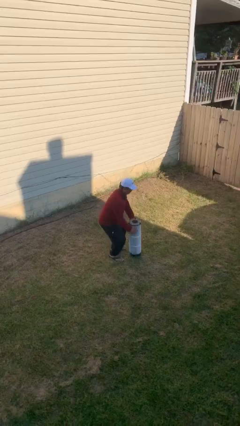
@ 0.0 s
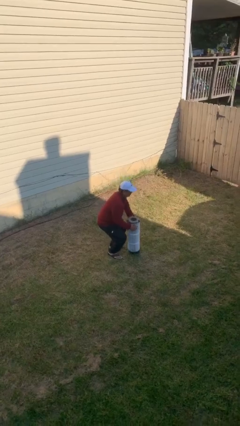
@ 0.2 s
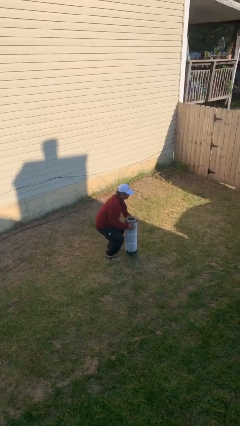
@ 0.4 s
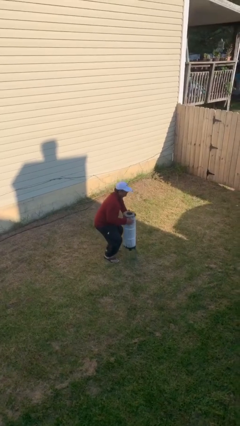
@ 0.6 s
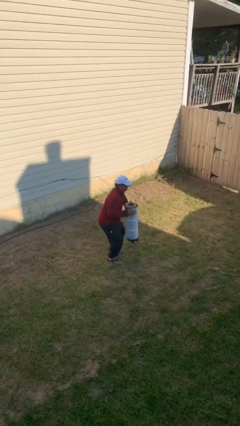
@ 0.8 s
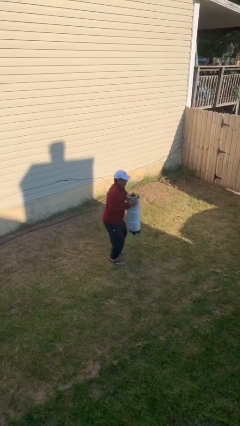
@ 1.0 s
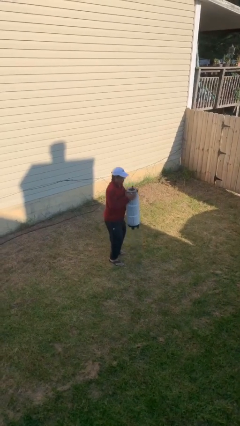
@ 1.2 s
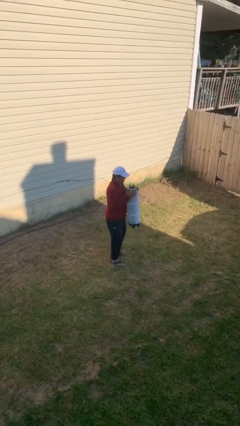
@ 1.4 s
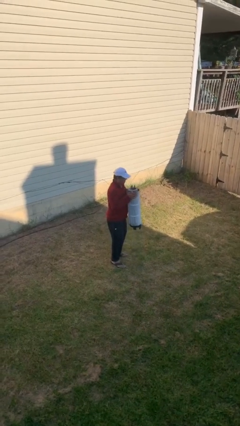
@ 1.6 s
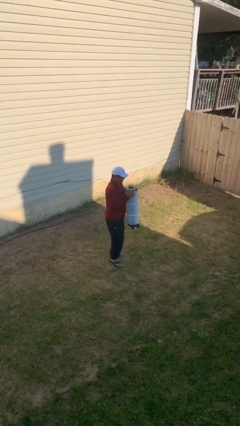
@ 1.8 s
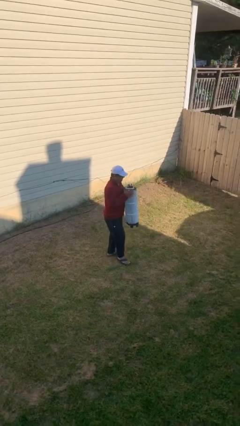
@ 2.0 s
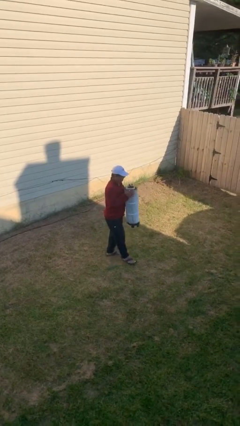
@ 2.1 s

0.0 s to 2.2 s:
person picks up object from floor

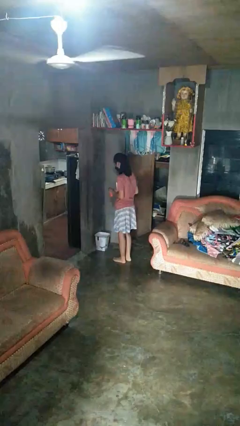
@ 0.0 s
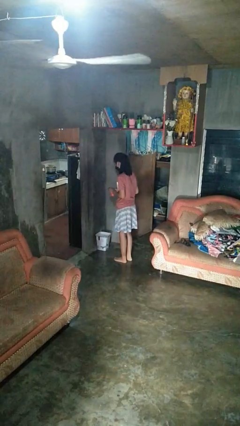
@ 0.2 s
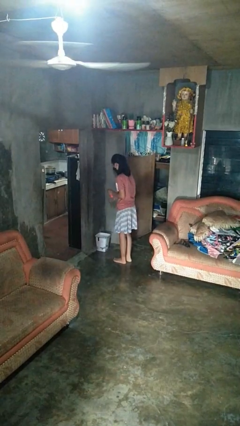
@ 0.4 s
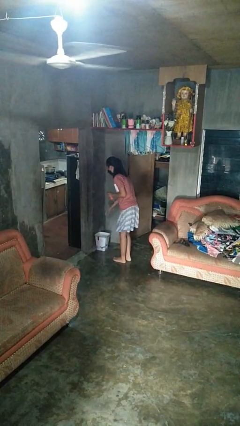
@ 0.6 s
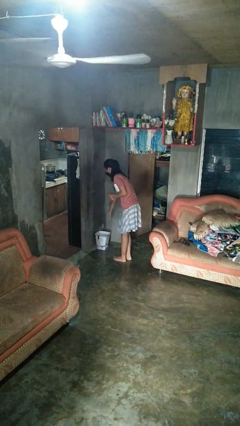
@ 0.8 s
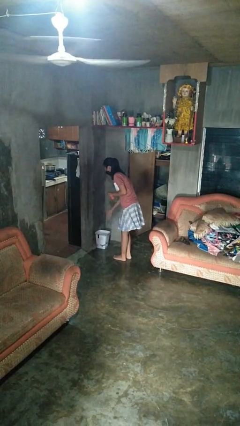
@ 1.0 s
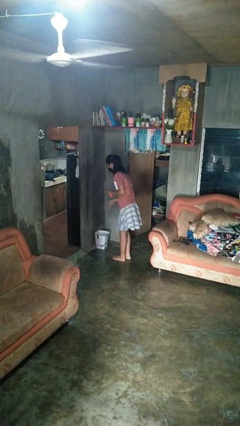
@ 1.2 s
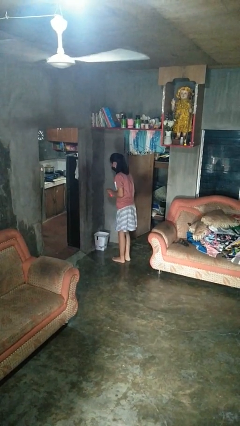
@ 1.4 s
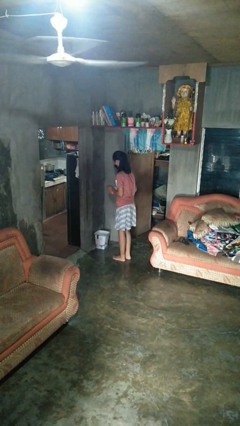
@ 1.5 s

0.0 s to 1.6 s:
person discards trash

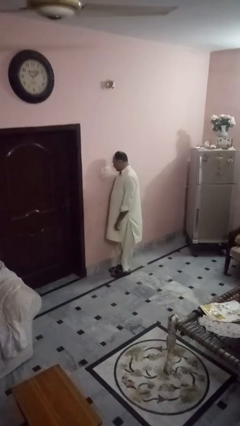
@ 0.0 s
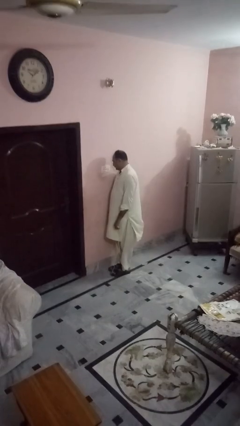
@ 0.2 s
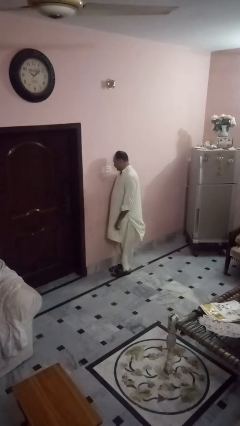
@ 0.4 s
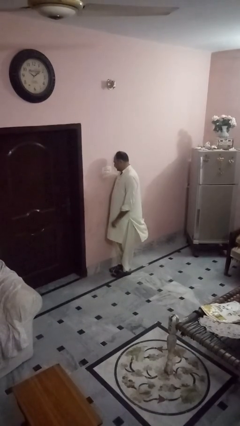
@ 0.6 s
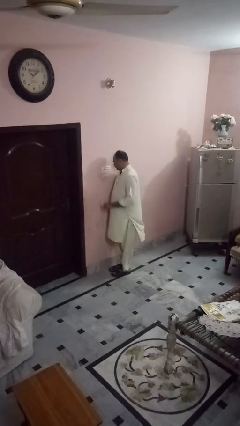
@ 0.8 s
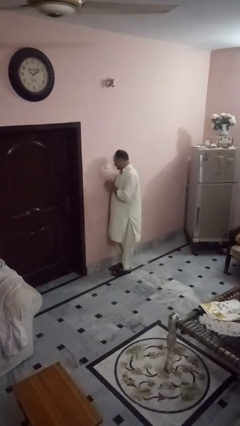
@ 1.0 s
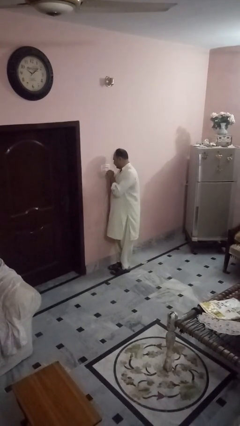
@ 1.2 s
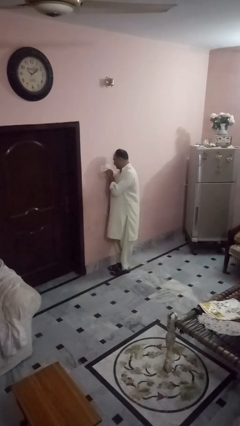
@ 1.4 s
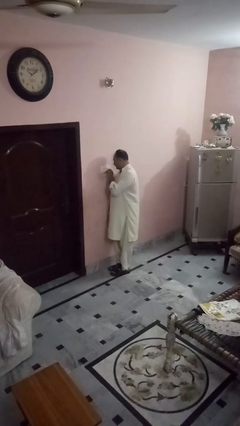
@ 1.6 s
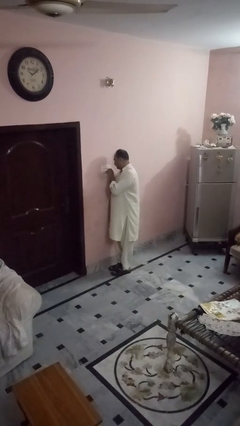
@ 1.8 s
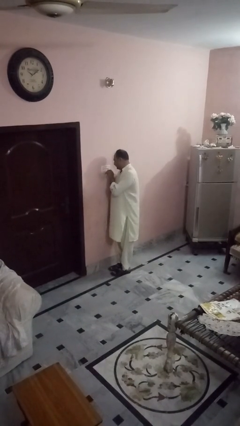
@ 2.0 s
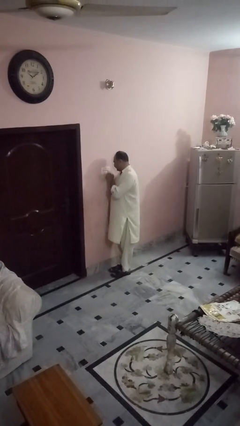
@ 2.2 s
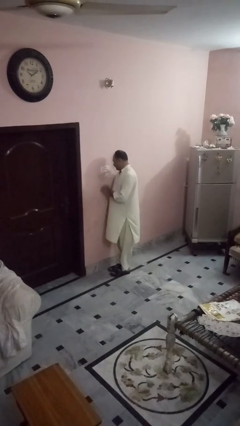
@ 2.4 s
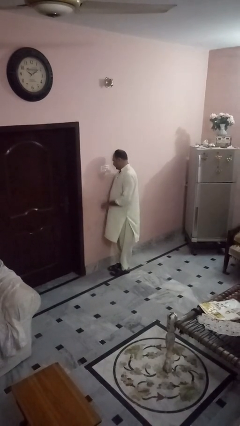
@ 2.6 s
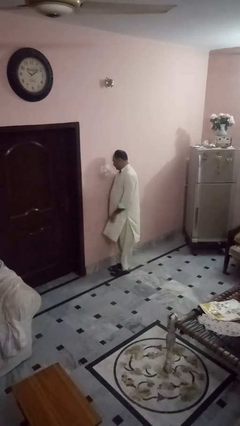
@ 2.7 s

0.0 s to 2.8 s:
person plugs into electrical socket

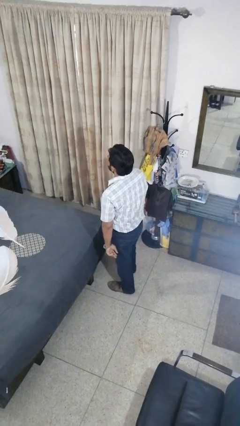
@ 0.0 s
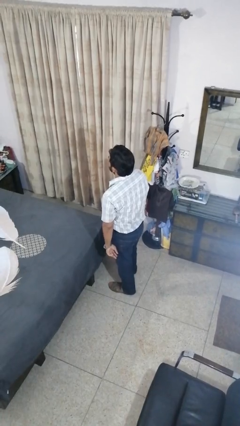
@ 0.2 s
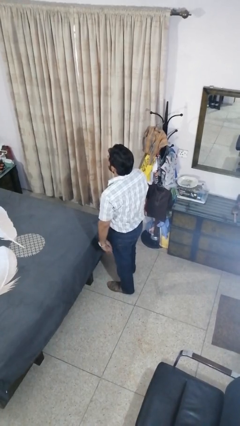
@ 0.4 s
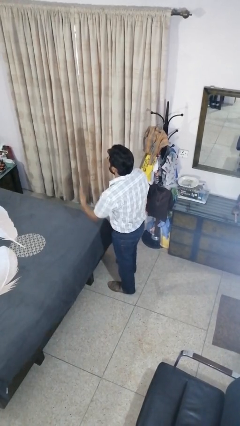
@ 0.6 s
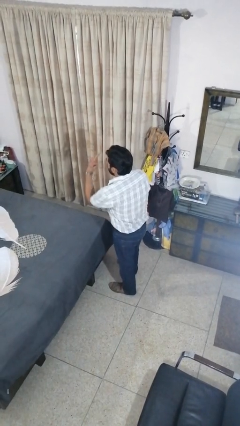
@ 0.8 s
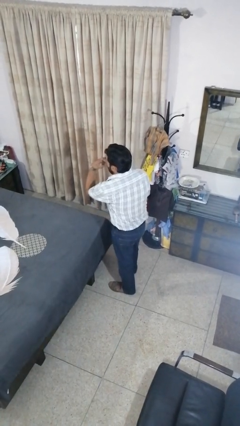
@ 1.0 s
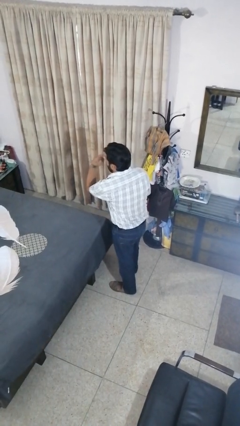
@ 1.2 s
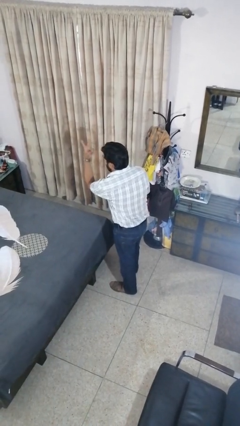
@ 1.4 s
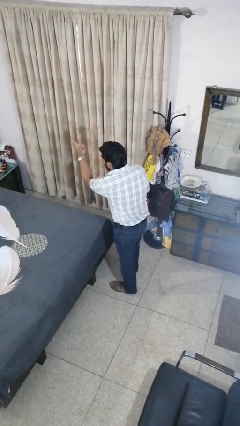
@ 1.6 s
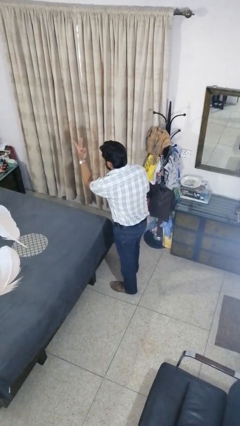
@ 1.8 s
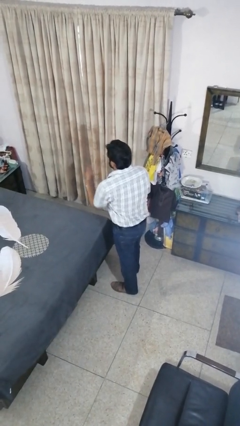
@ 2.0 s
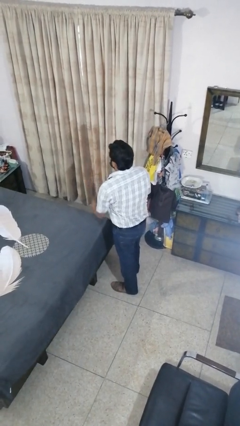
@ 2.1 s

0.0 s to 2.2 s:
person gestures watch closely

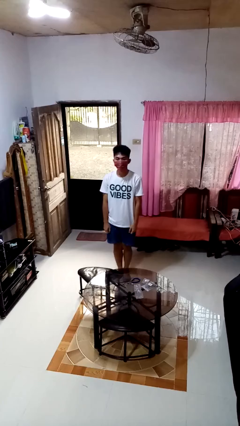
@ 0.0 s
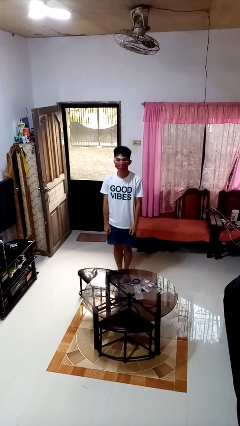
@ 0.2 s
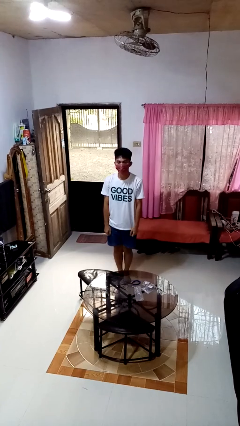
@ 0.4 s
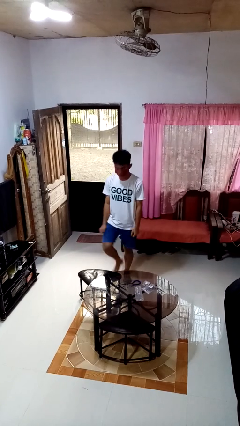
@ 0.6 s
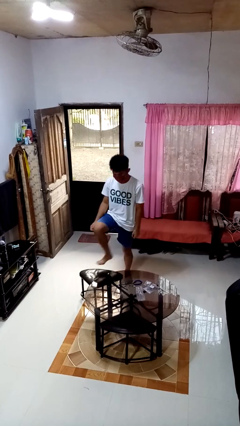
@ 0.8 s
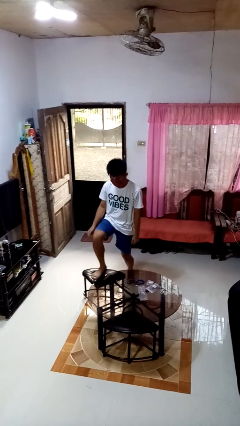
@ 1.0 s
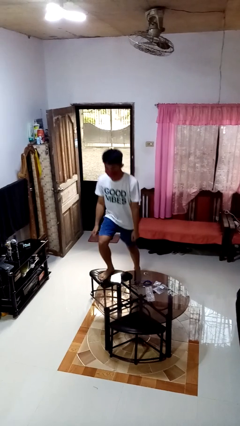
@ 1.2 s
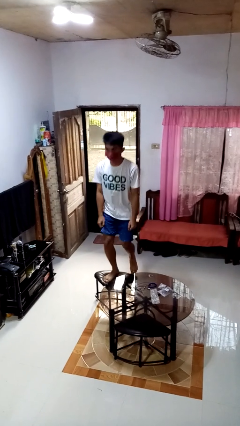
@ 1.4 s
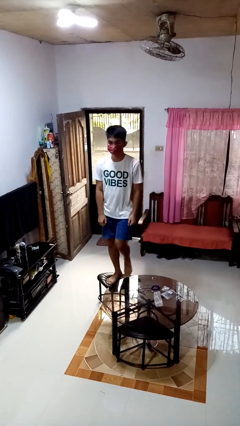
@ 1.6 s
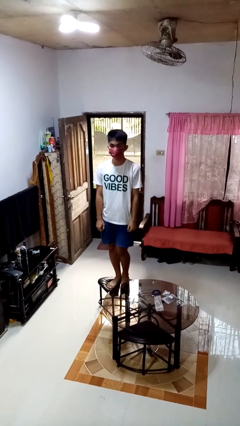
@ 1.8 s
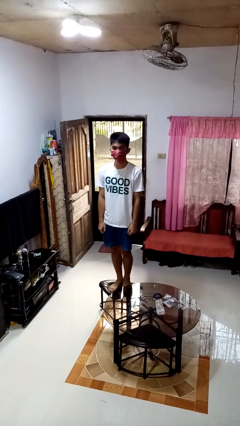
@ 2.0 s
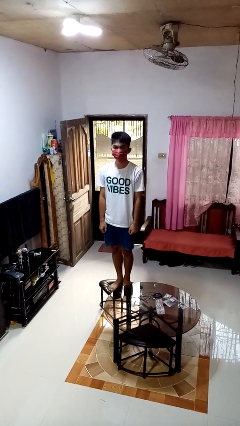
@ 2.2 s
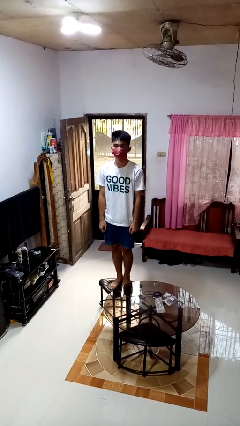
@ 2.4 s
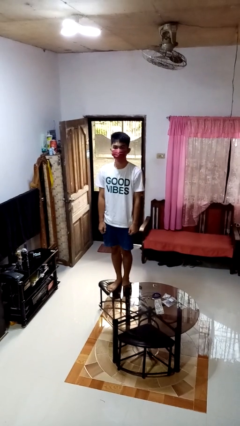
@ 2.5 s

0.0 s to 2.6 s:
person climbs on chair

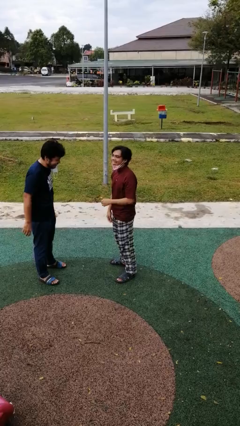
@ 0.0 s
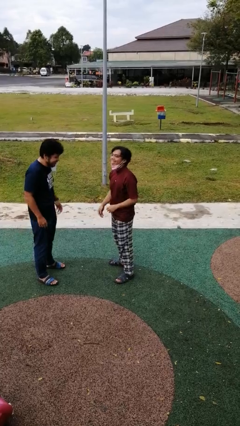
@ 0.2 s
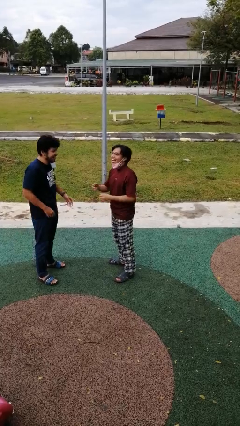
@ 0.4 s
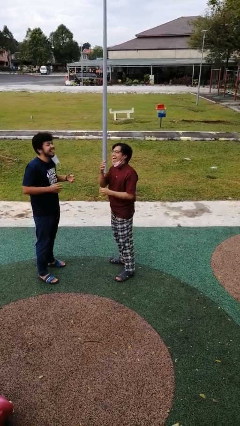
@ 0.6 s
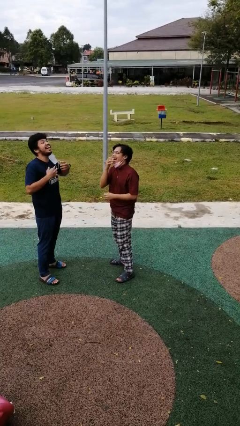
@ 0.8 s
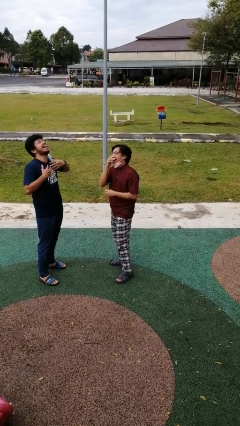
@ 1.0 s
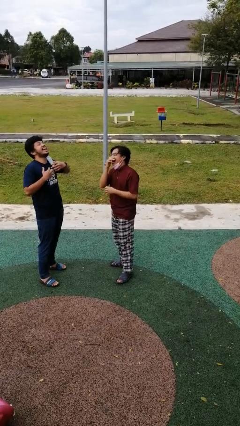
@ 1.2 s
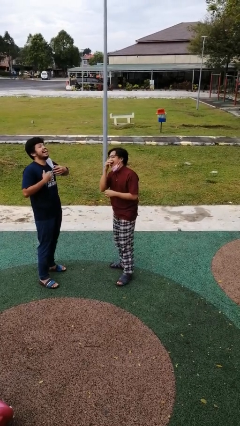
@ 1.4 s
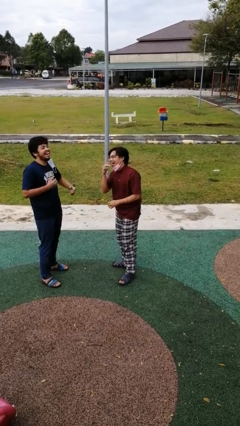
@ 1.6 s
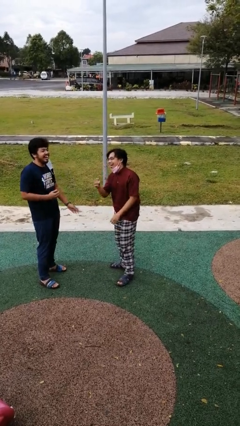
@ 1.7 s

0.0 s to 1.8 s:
person laughs with person

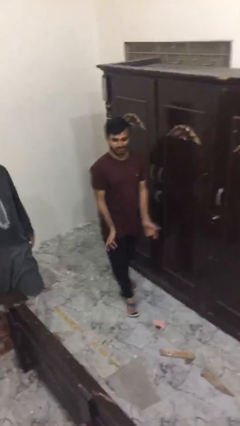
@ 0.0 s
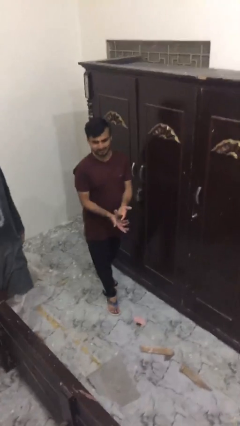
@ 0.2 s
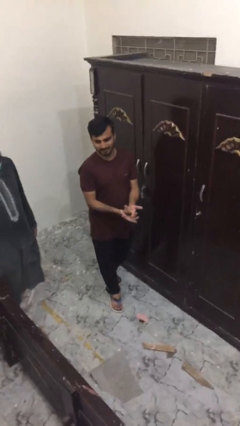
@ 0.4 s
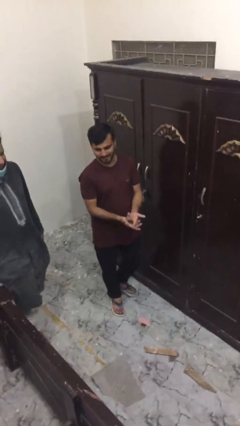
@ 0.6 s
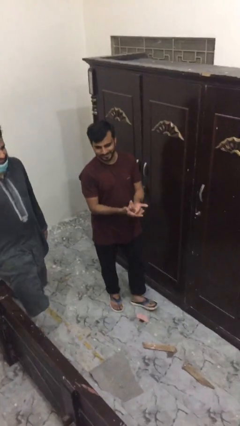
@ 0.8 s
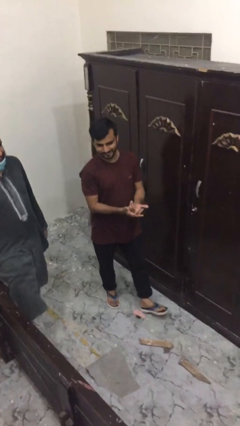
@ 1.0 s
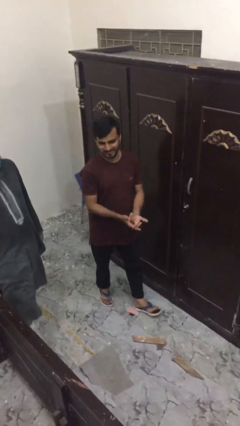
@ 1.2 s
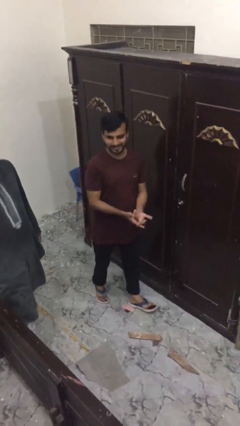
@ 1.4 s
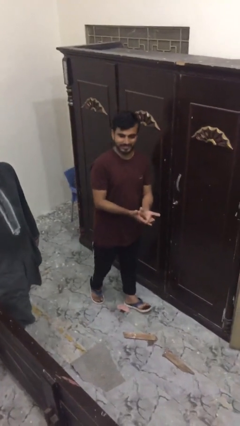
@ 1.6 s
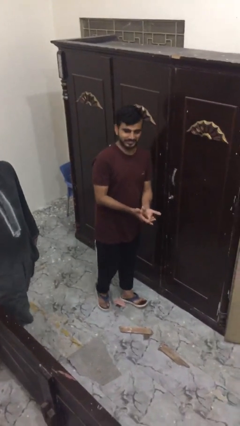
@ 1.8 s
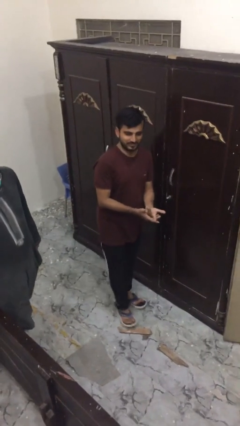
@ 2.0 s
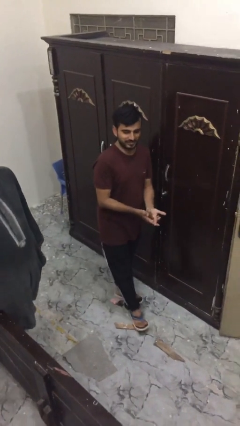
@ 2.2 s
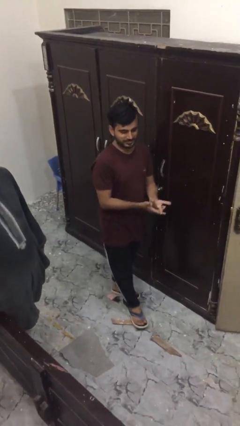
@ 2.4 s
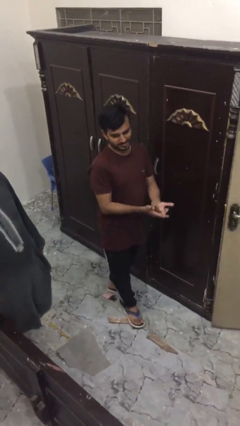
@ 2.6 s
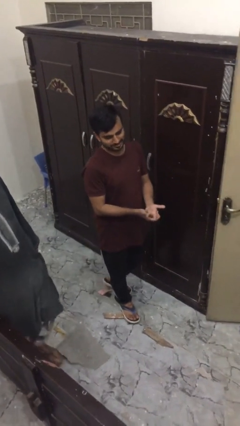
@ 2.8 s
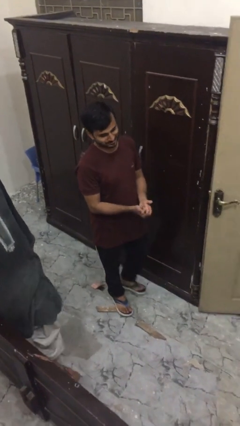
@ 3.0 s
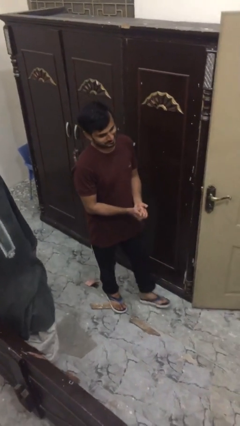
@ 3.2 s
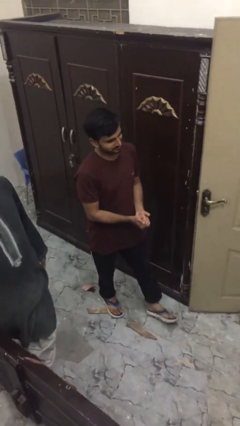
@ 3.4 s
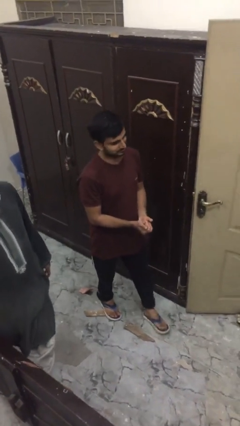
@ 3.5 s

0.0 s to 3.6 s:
person talks to person
